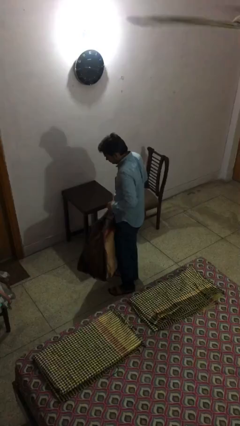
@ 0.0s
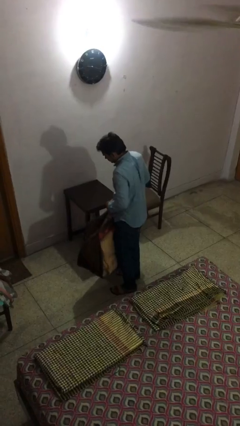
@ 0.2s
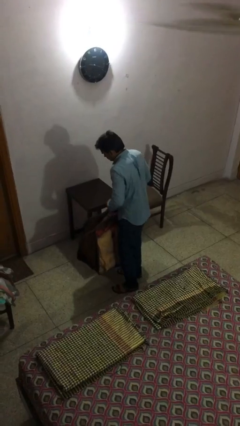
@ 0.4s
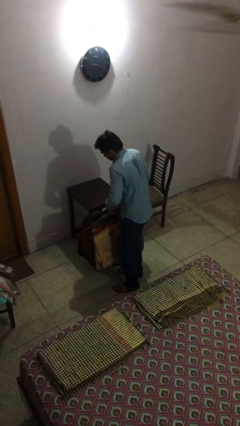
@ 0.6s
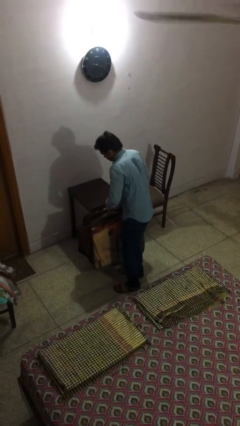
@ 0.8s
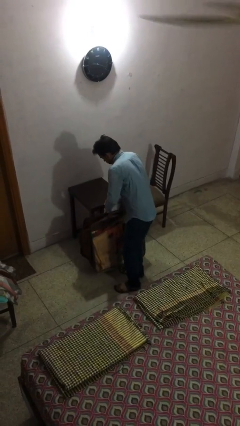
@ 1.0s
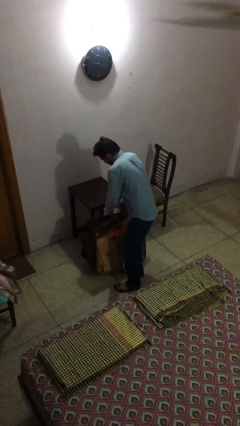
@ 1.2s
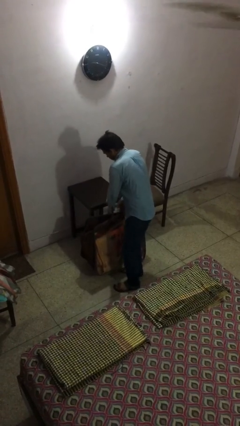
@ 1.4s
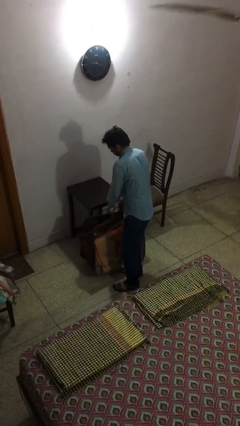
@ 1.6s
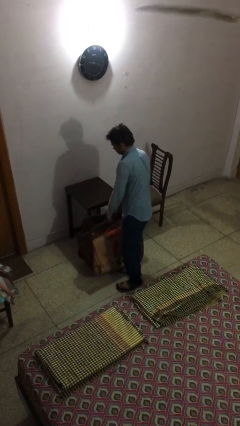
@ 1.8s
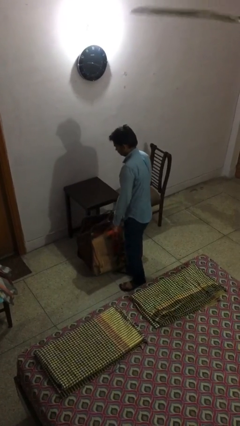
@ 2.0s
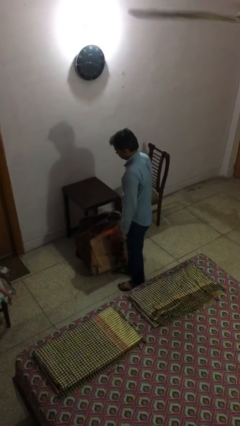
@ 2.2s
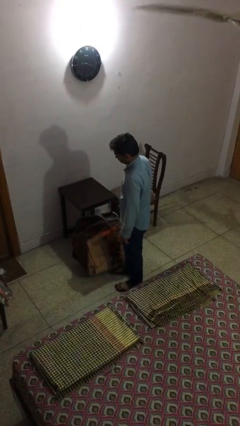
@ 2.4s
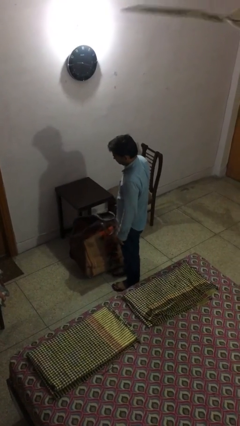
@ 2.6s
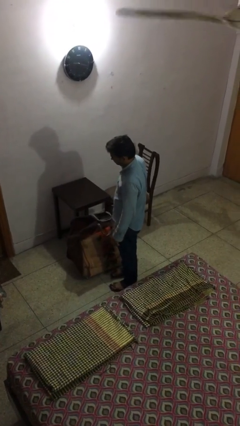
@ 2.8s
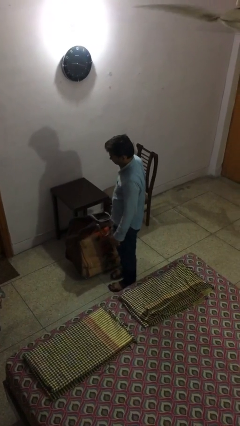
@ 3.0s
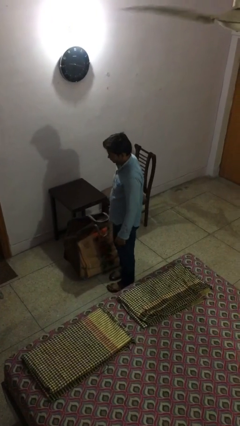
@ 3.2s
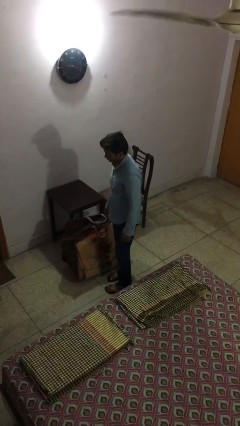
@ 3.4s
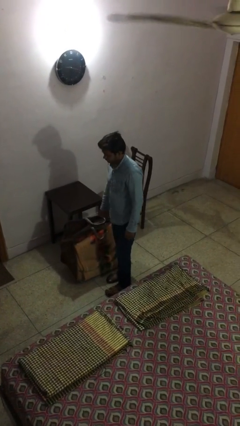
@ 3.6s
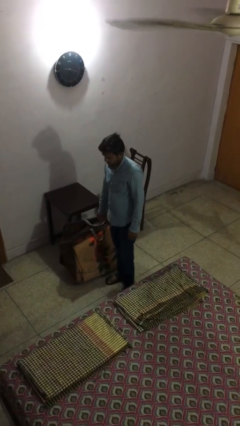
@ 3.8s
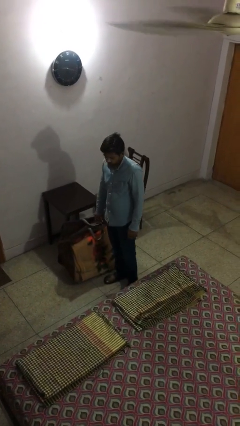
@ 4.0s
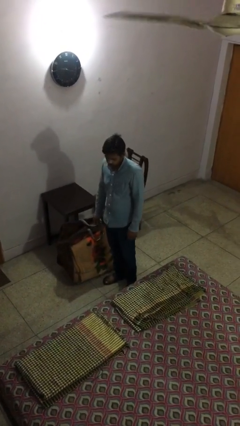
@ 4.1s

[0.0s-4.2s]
person puts down object on floor

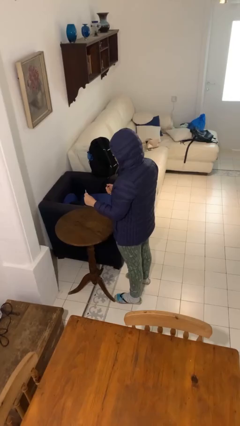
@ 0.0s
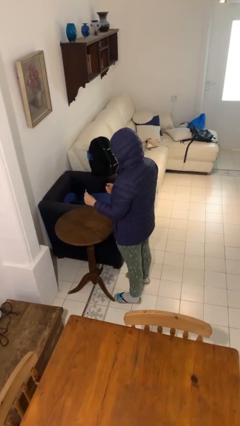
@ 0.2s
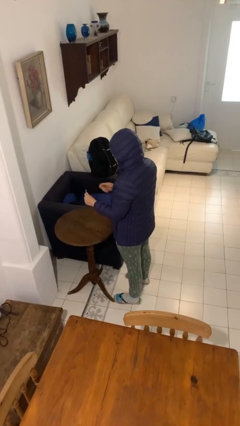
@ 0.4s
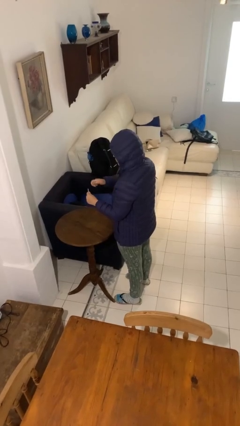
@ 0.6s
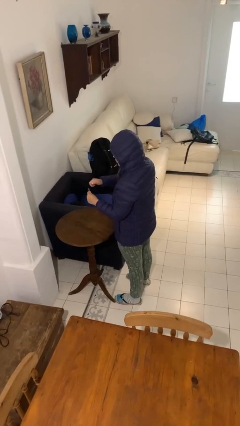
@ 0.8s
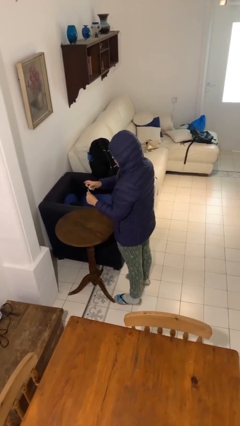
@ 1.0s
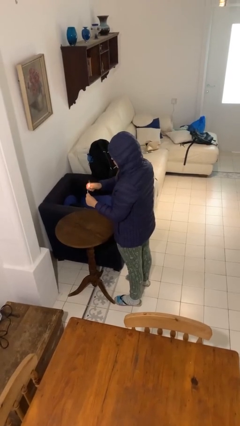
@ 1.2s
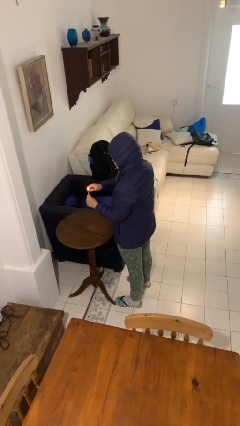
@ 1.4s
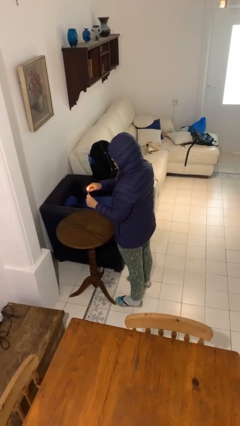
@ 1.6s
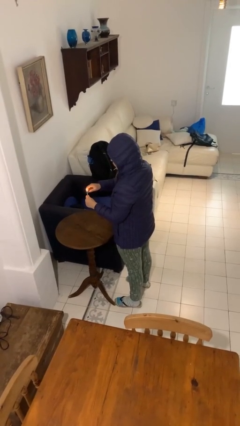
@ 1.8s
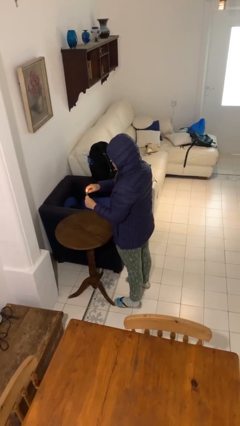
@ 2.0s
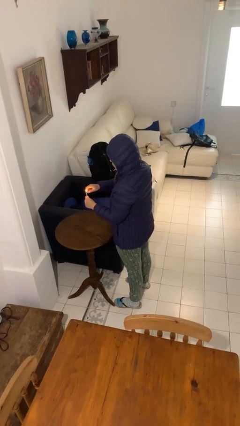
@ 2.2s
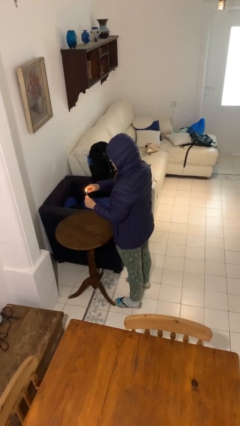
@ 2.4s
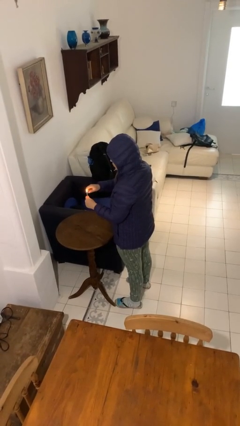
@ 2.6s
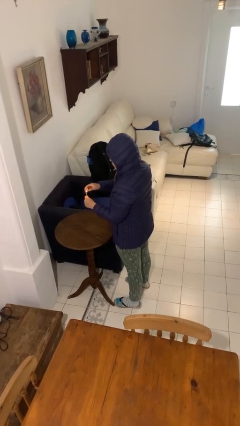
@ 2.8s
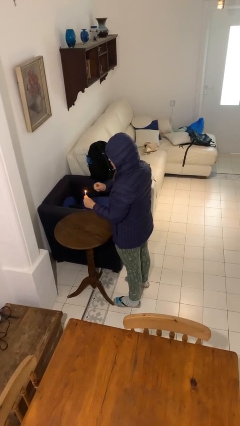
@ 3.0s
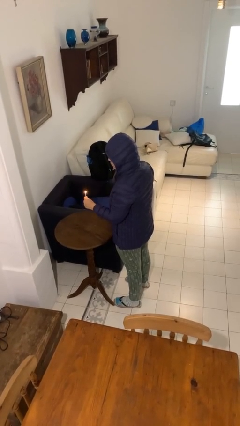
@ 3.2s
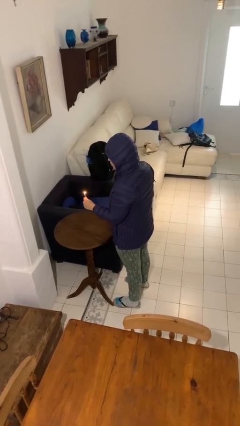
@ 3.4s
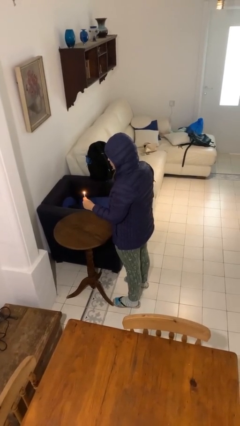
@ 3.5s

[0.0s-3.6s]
person lights candle

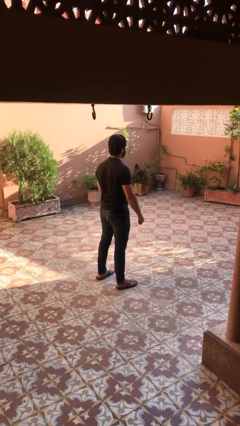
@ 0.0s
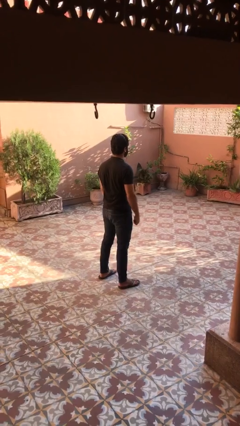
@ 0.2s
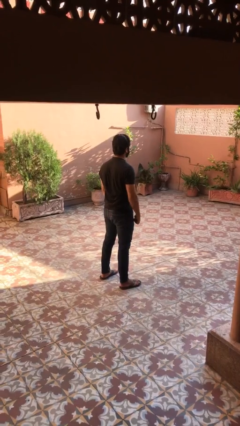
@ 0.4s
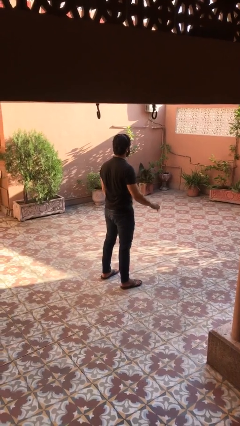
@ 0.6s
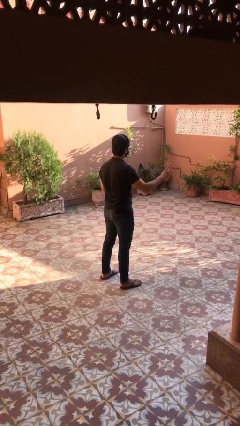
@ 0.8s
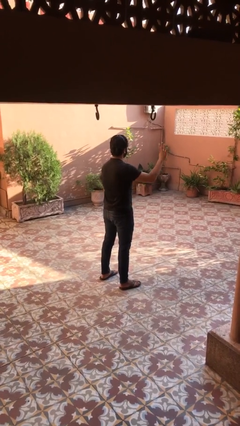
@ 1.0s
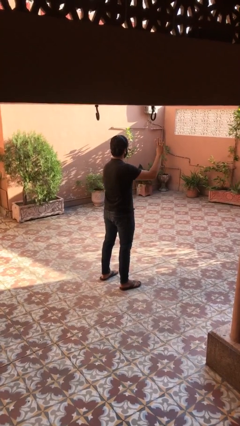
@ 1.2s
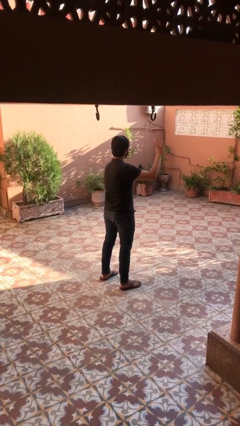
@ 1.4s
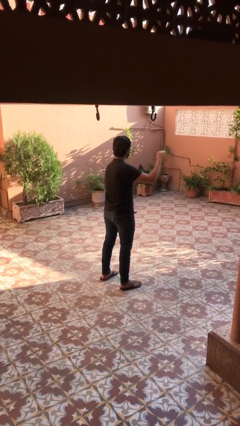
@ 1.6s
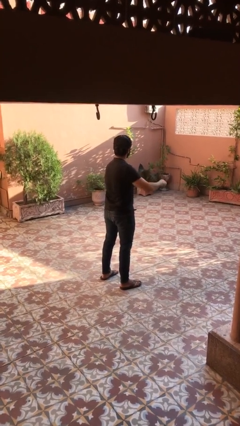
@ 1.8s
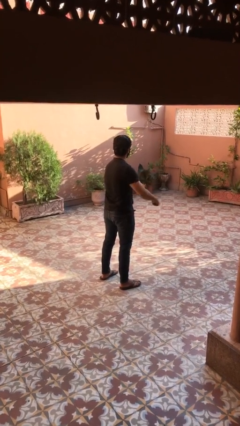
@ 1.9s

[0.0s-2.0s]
person gestures number four

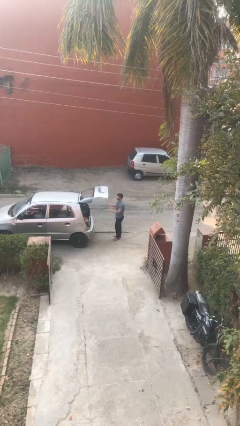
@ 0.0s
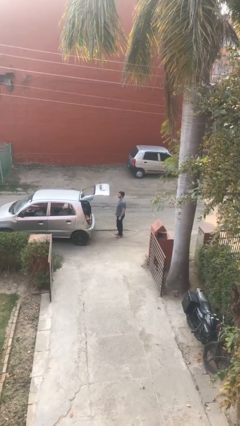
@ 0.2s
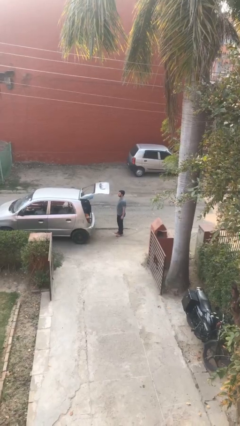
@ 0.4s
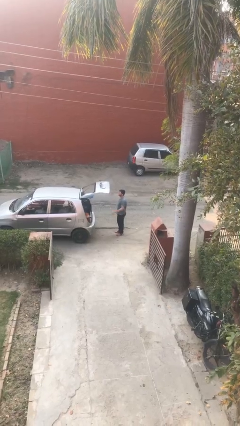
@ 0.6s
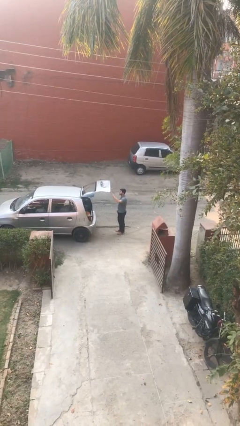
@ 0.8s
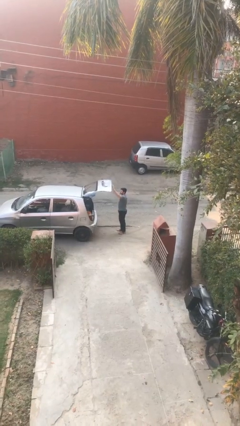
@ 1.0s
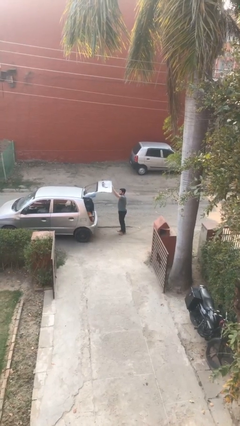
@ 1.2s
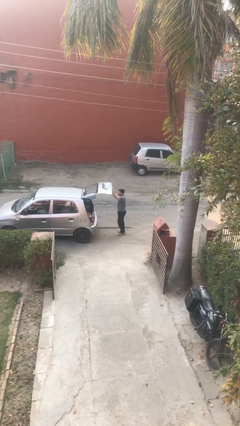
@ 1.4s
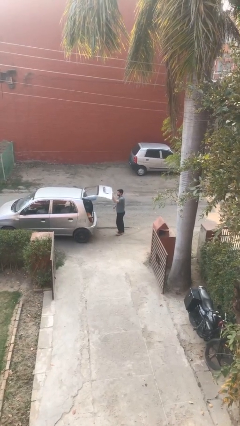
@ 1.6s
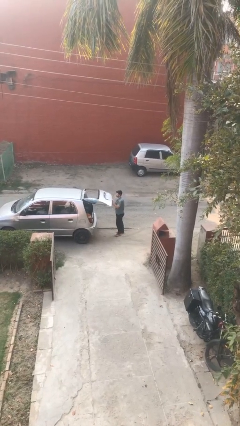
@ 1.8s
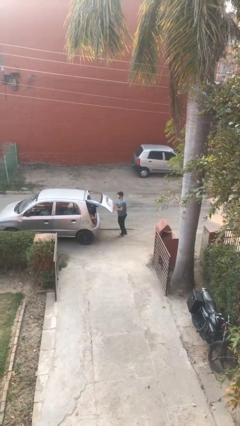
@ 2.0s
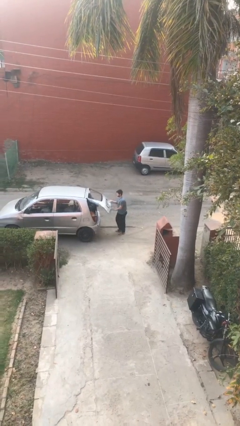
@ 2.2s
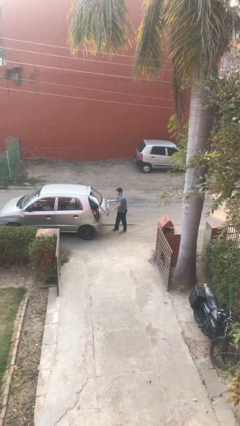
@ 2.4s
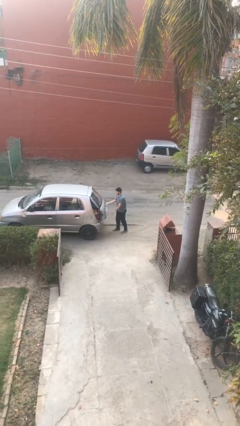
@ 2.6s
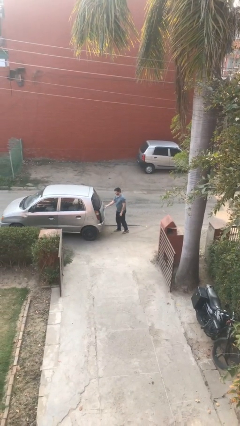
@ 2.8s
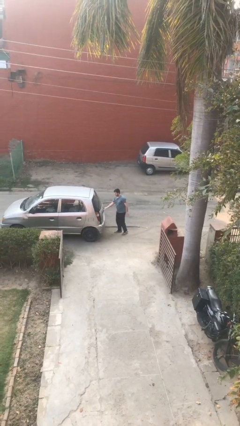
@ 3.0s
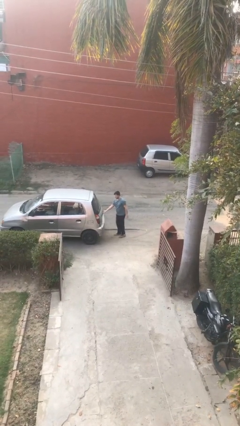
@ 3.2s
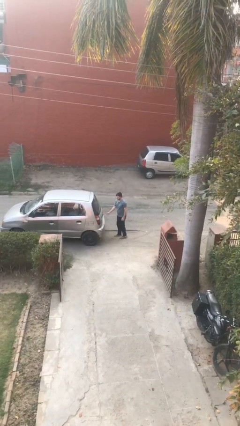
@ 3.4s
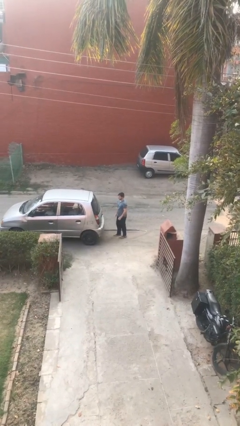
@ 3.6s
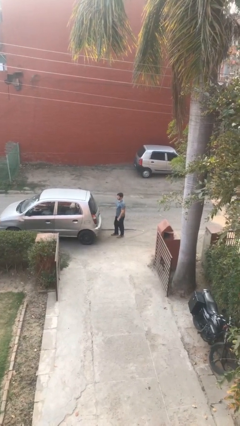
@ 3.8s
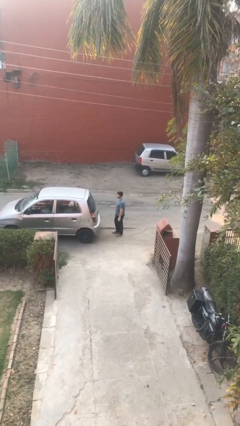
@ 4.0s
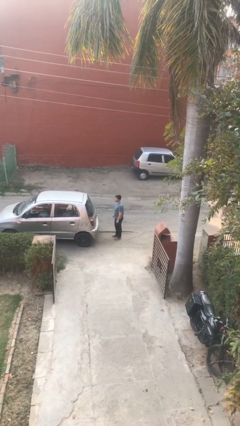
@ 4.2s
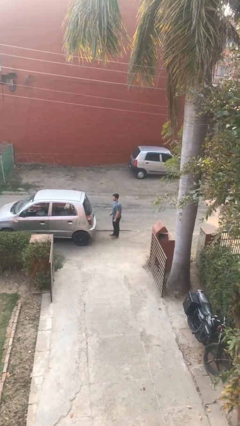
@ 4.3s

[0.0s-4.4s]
person closes car trunk

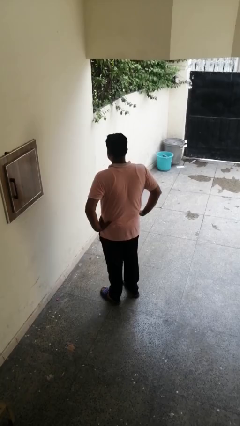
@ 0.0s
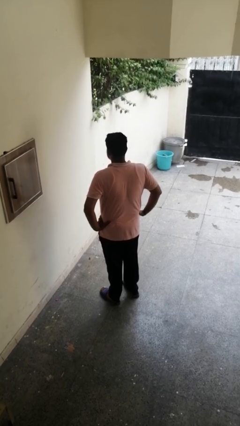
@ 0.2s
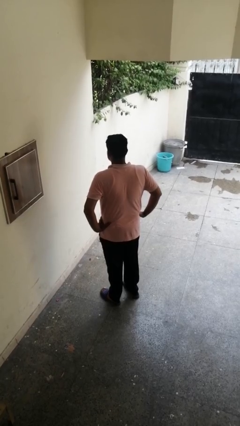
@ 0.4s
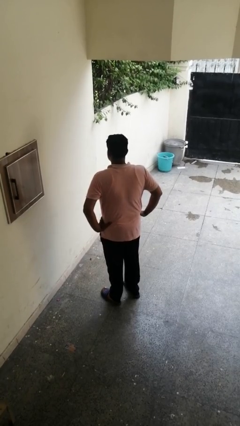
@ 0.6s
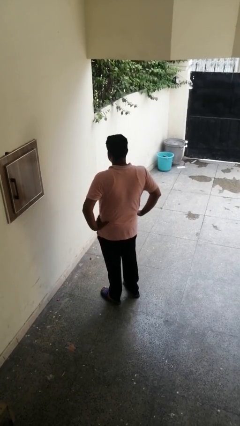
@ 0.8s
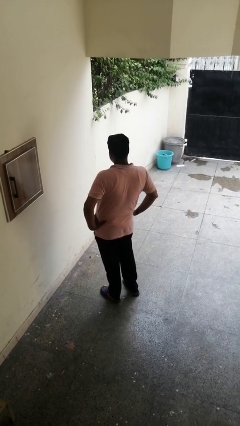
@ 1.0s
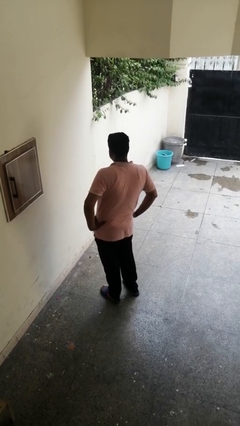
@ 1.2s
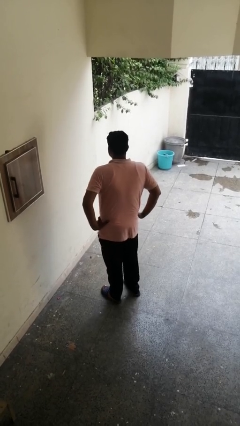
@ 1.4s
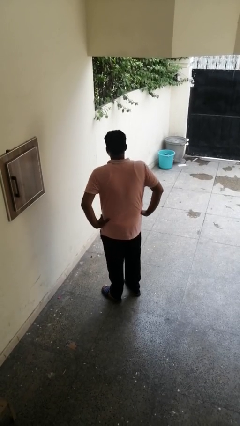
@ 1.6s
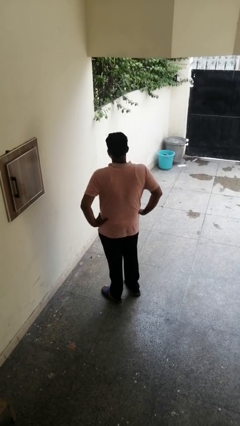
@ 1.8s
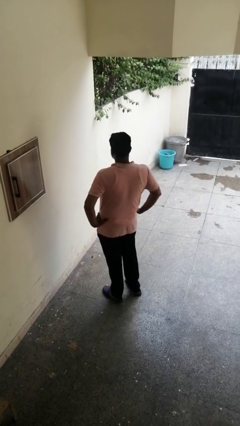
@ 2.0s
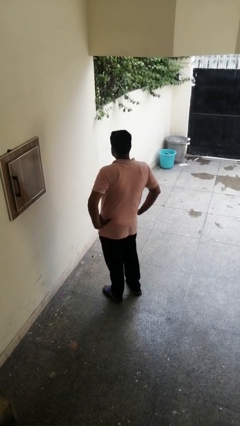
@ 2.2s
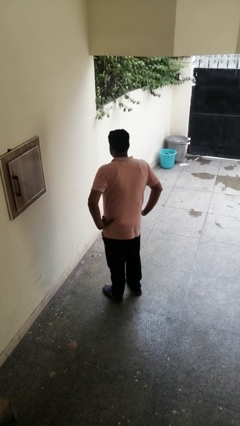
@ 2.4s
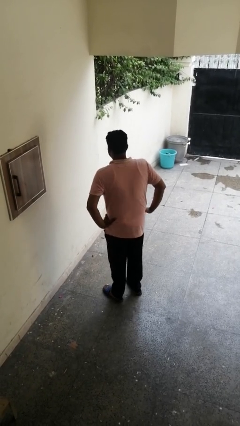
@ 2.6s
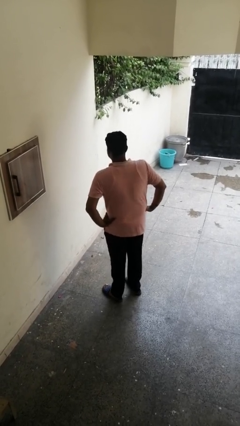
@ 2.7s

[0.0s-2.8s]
person wiggles hips

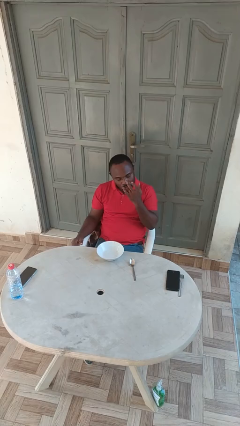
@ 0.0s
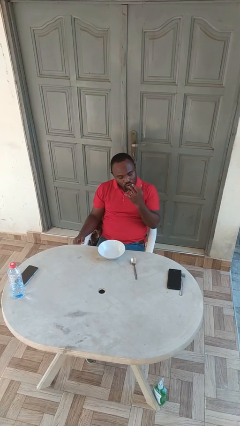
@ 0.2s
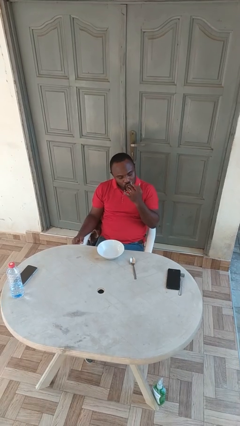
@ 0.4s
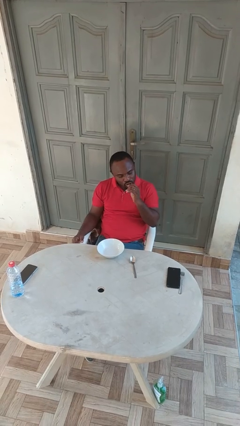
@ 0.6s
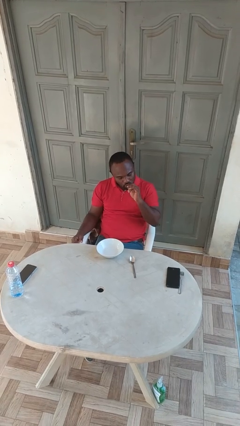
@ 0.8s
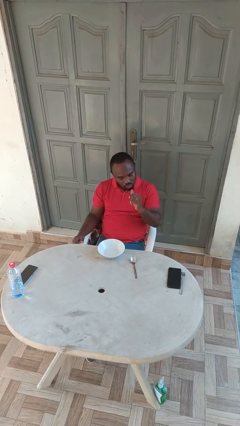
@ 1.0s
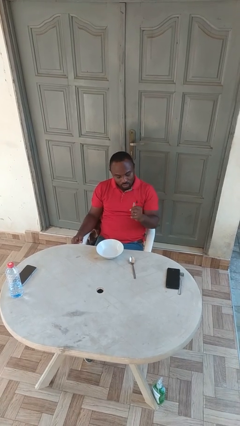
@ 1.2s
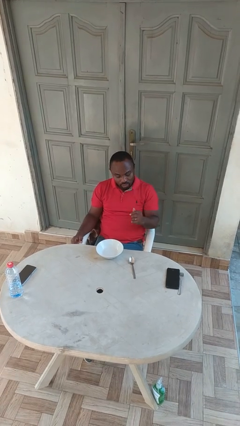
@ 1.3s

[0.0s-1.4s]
person licks fingers
